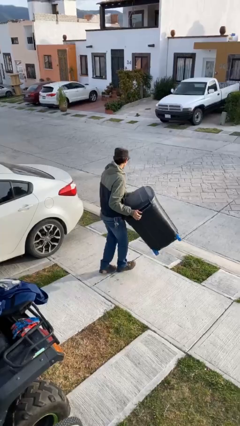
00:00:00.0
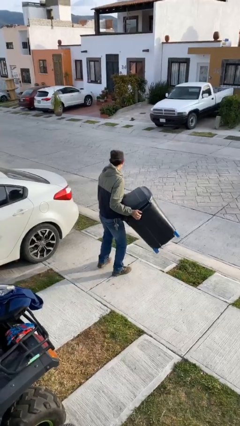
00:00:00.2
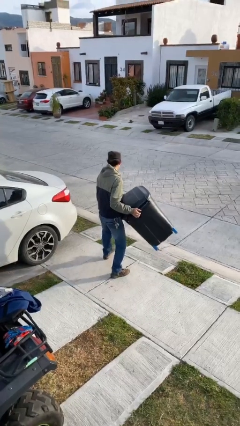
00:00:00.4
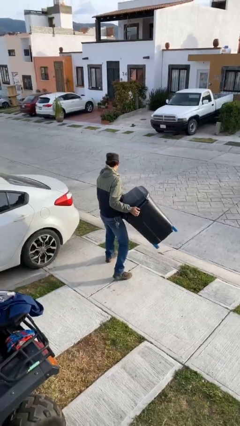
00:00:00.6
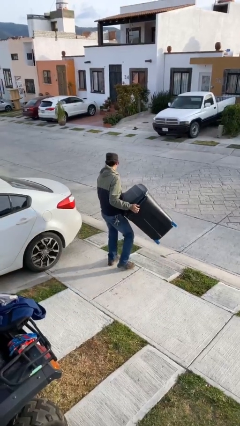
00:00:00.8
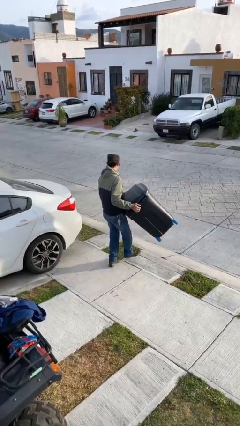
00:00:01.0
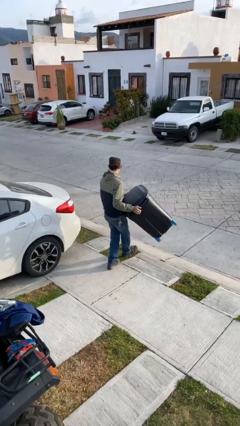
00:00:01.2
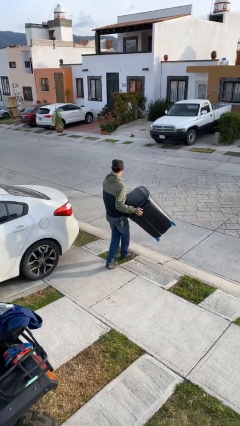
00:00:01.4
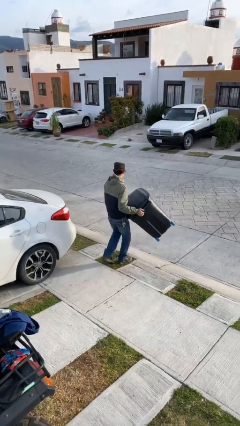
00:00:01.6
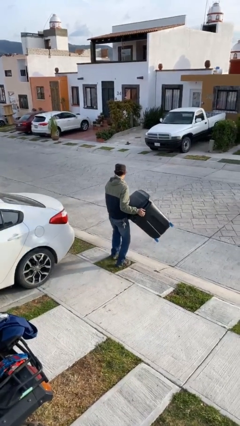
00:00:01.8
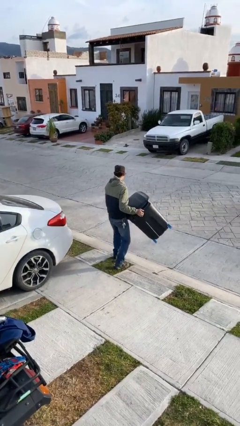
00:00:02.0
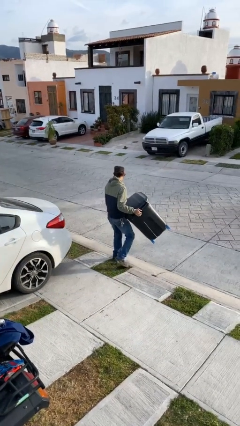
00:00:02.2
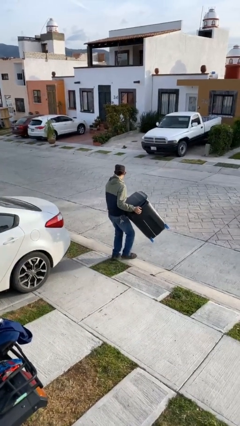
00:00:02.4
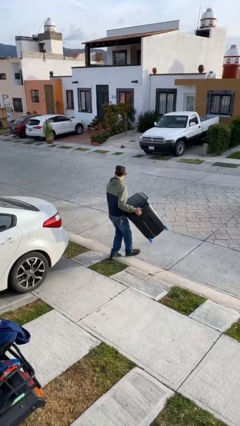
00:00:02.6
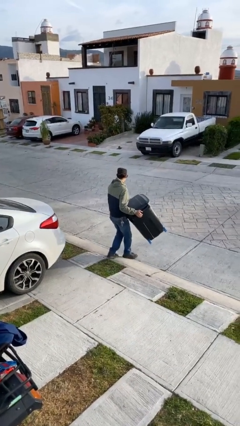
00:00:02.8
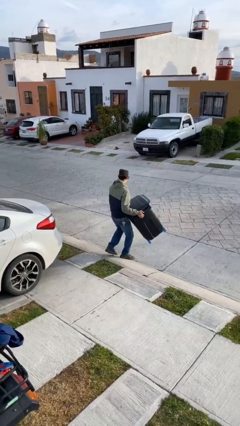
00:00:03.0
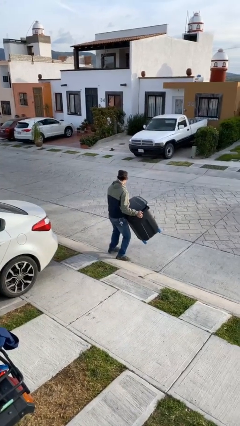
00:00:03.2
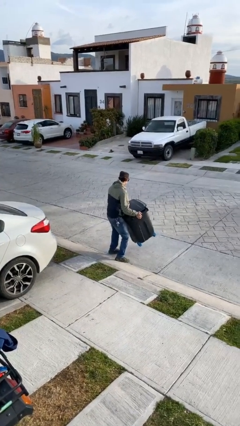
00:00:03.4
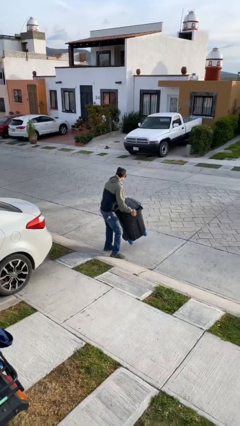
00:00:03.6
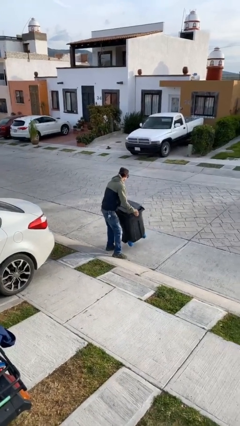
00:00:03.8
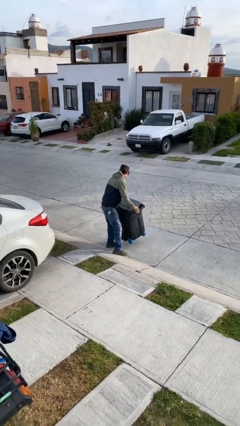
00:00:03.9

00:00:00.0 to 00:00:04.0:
person carries heavy object

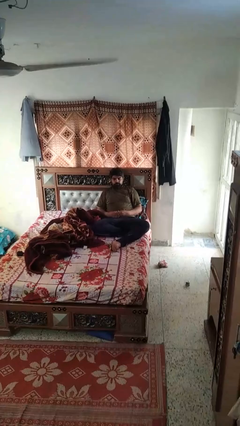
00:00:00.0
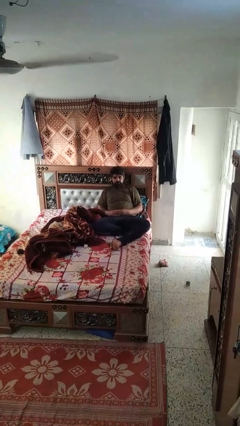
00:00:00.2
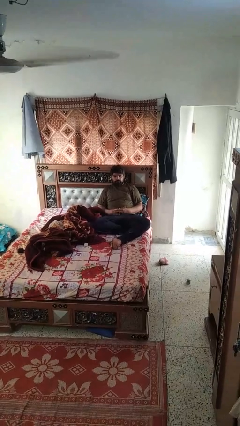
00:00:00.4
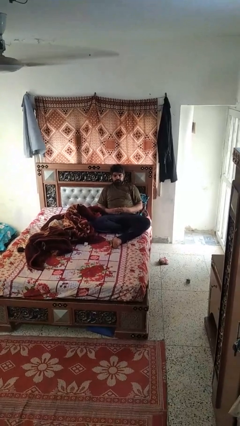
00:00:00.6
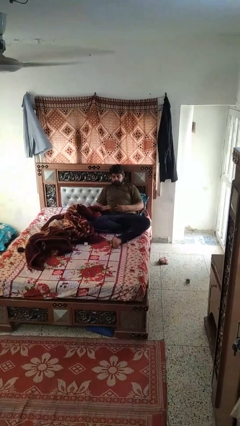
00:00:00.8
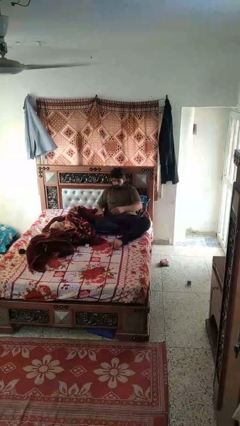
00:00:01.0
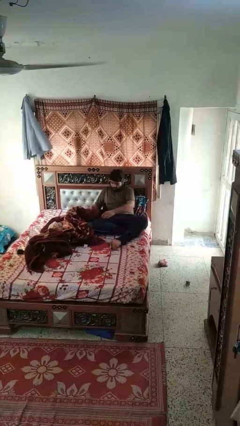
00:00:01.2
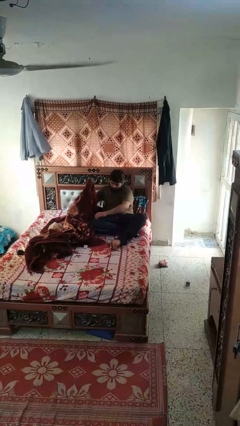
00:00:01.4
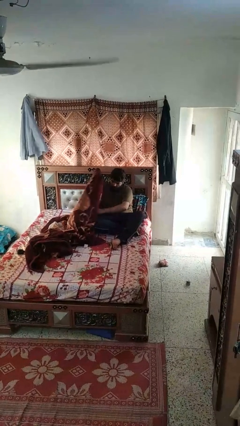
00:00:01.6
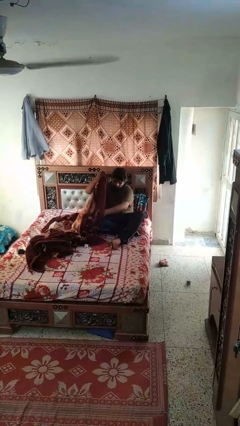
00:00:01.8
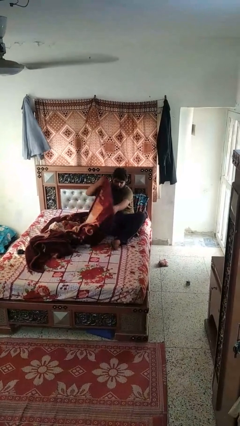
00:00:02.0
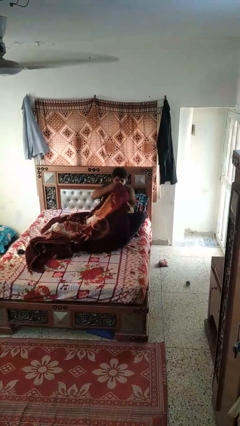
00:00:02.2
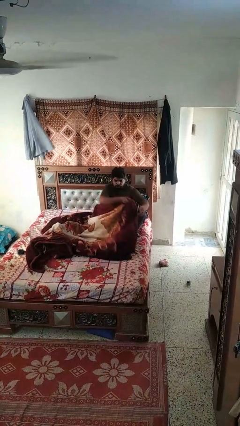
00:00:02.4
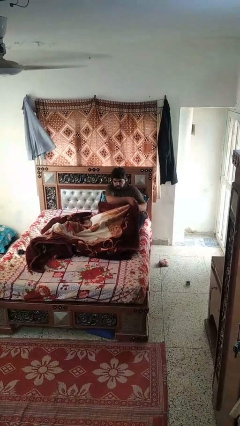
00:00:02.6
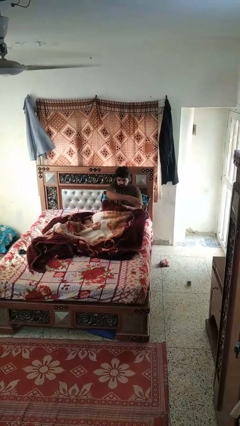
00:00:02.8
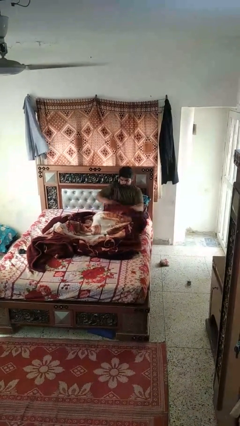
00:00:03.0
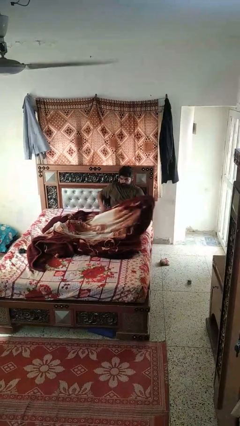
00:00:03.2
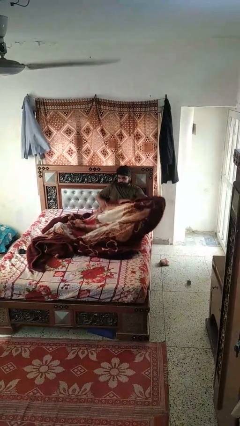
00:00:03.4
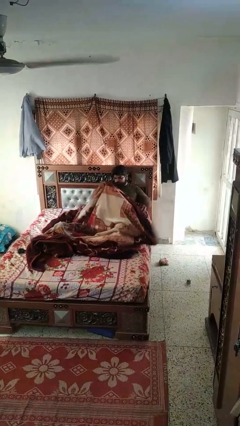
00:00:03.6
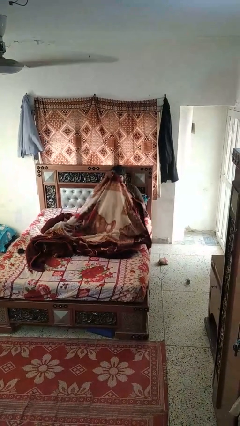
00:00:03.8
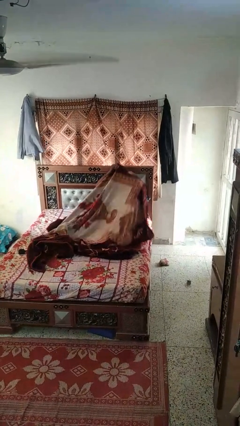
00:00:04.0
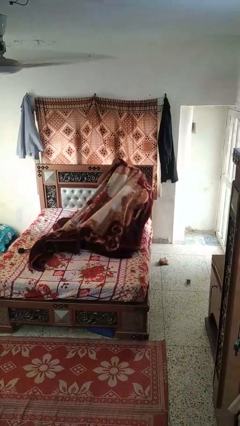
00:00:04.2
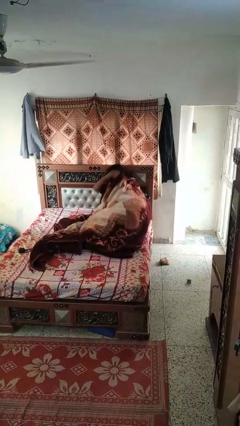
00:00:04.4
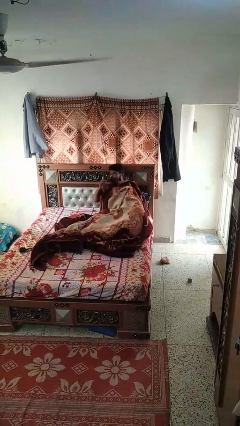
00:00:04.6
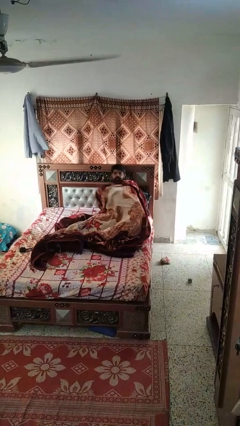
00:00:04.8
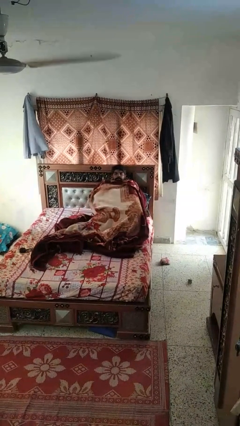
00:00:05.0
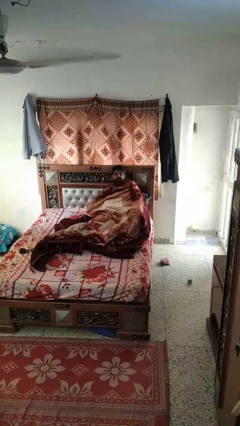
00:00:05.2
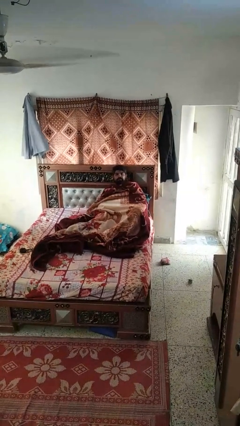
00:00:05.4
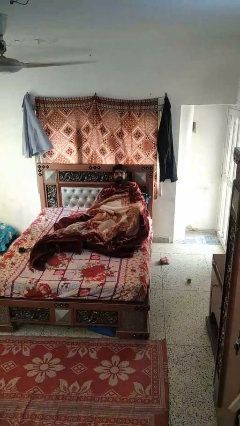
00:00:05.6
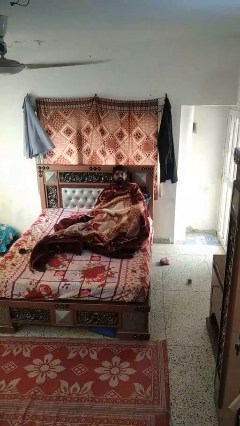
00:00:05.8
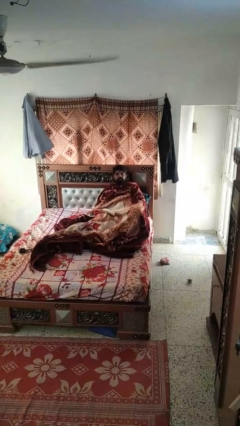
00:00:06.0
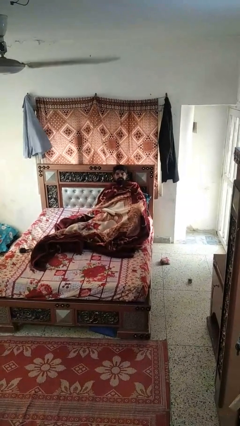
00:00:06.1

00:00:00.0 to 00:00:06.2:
person covers with blanket

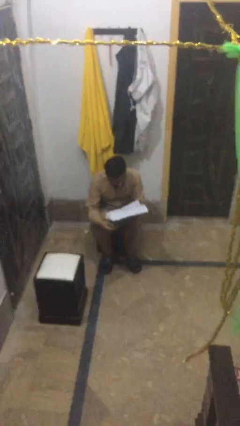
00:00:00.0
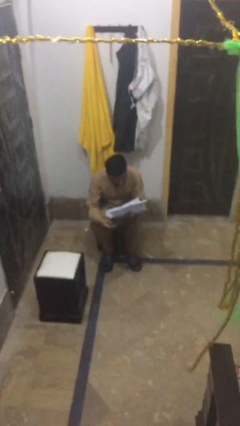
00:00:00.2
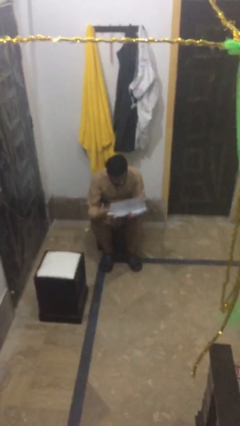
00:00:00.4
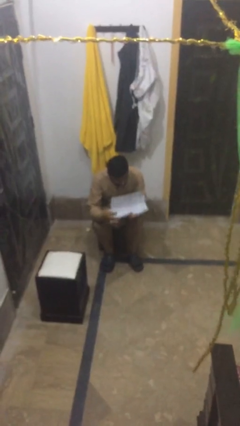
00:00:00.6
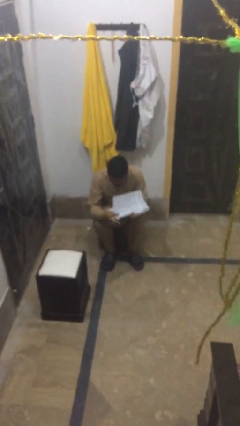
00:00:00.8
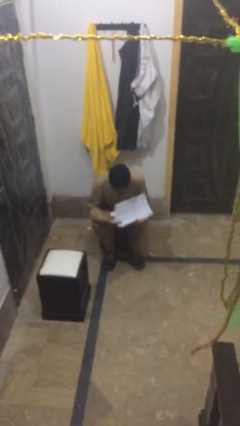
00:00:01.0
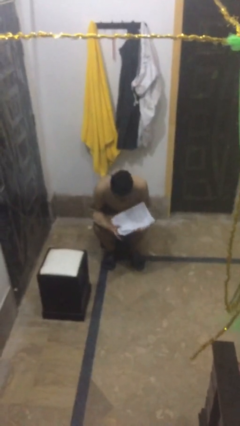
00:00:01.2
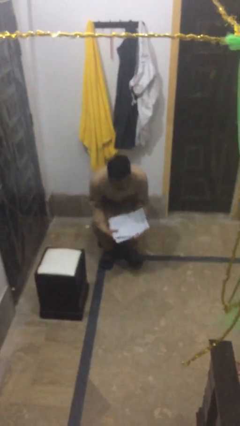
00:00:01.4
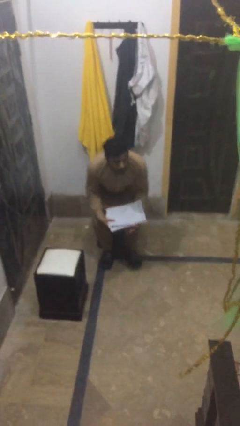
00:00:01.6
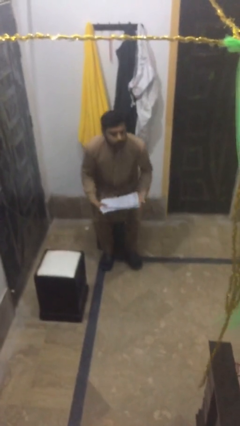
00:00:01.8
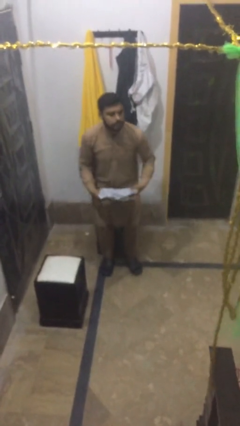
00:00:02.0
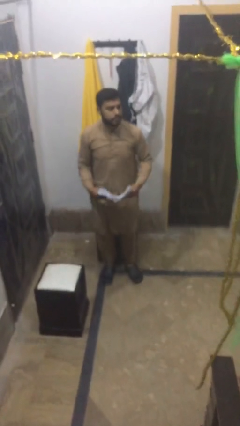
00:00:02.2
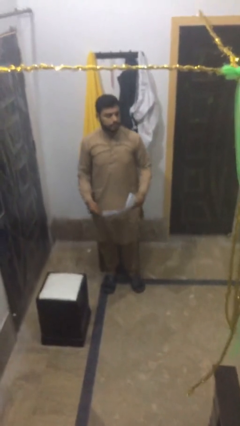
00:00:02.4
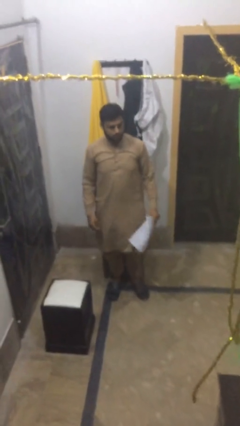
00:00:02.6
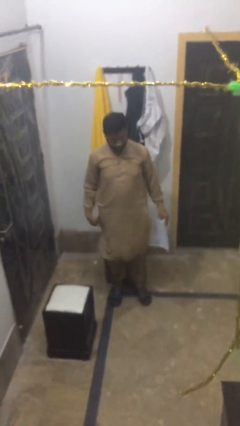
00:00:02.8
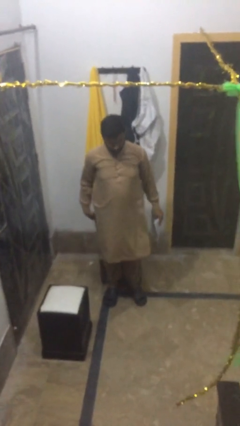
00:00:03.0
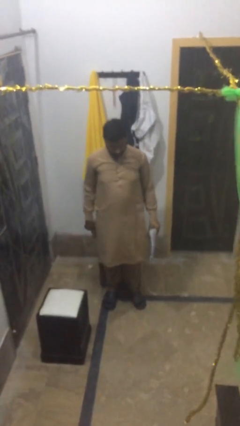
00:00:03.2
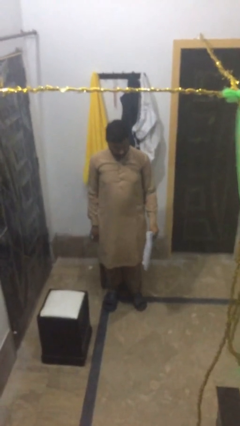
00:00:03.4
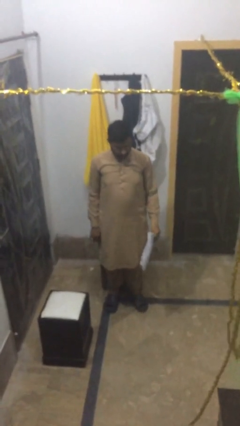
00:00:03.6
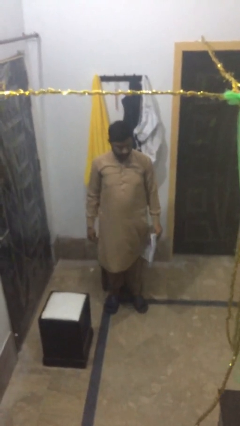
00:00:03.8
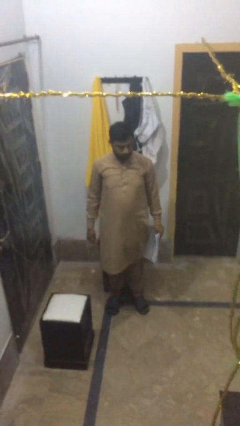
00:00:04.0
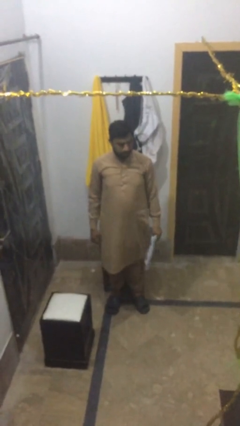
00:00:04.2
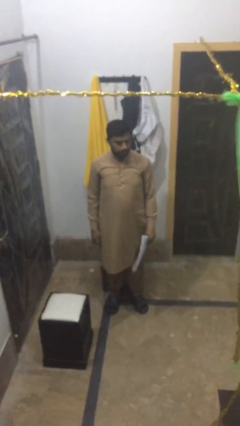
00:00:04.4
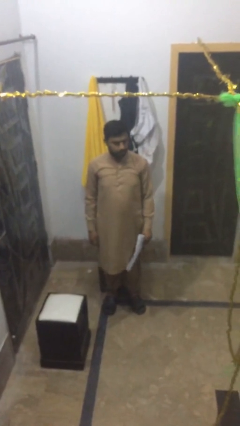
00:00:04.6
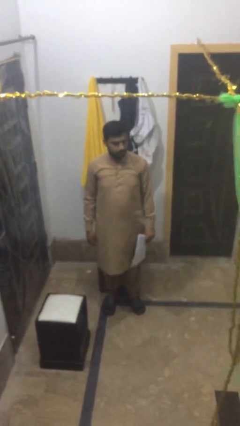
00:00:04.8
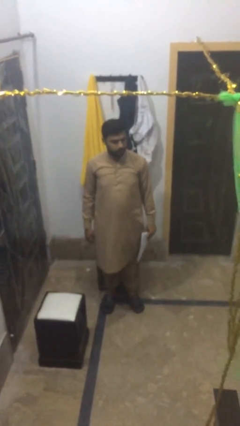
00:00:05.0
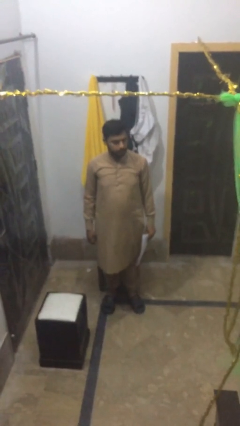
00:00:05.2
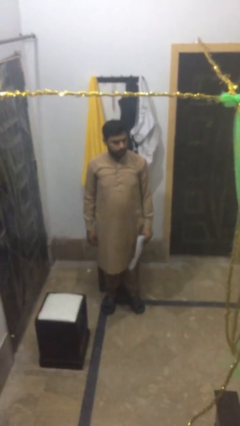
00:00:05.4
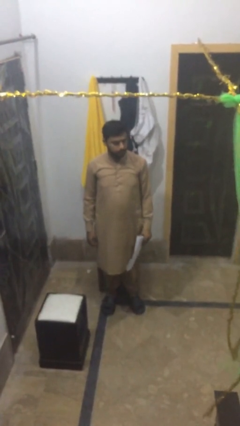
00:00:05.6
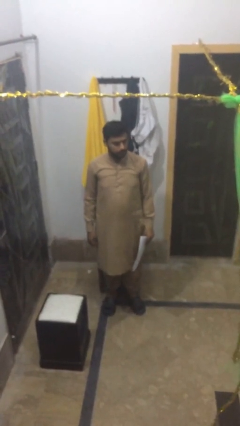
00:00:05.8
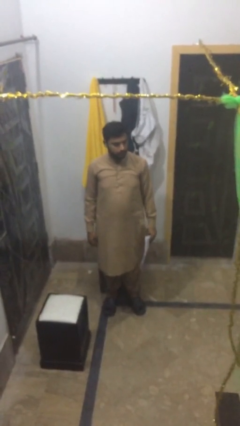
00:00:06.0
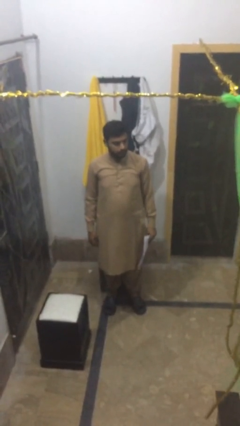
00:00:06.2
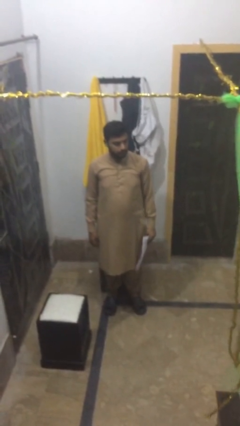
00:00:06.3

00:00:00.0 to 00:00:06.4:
person stands up

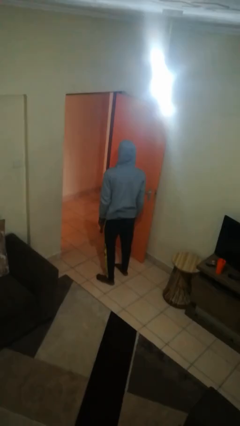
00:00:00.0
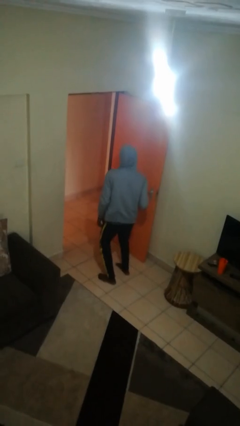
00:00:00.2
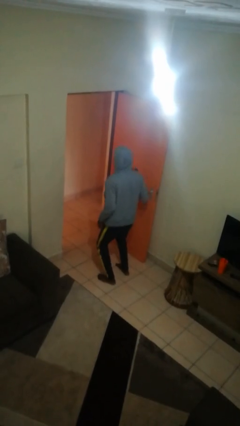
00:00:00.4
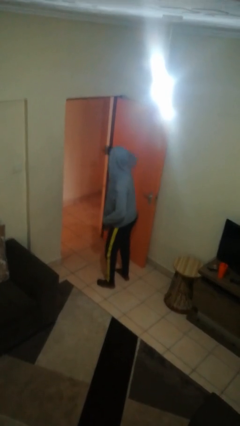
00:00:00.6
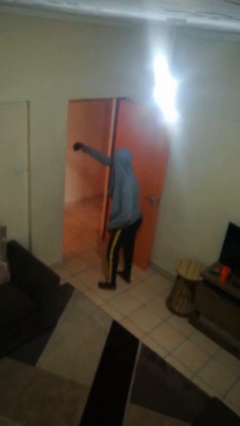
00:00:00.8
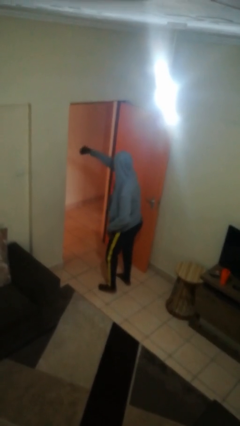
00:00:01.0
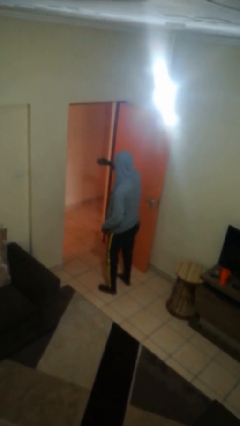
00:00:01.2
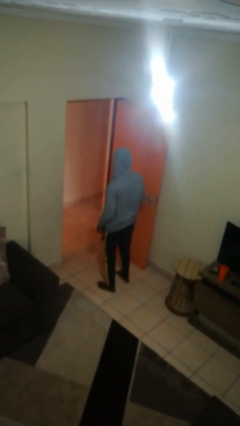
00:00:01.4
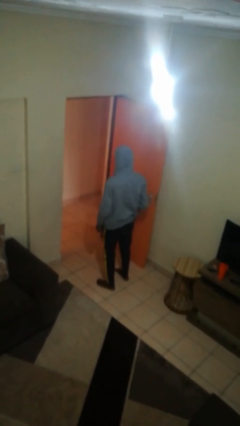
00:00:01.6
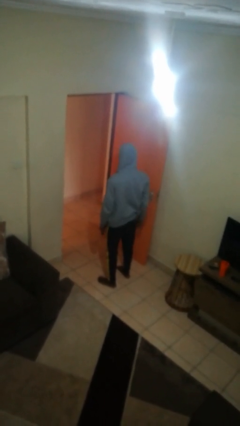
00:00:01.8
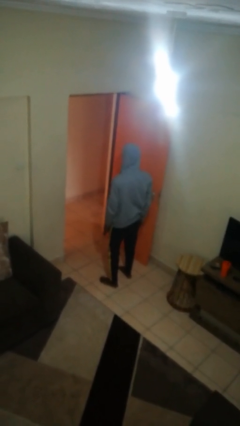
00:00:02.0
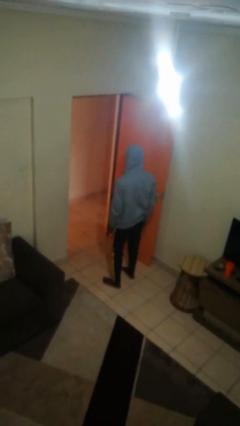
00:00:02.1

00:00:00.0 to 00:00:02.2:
person punches
